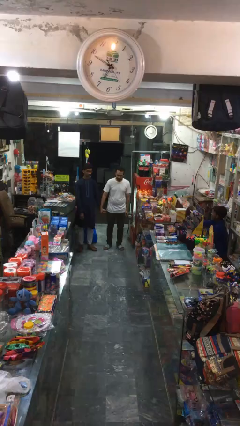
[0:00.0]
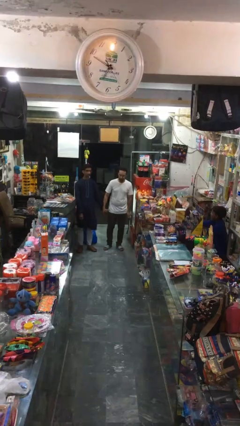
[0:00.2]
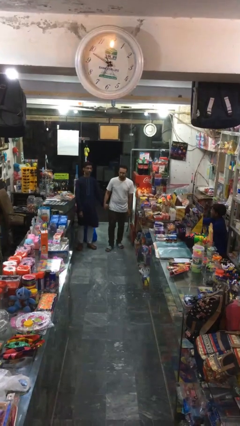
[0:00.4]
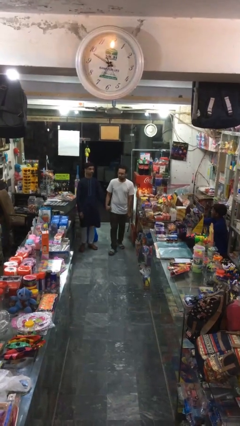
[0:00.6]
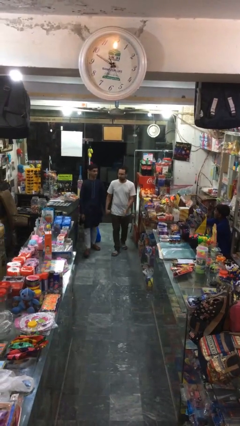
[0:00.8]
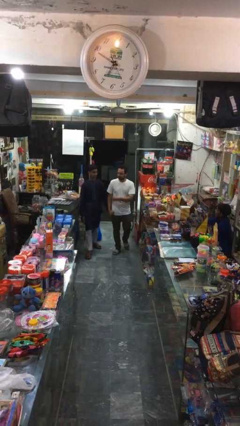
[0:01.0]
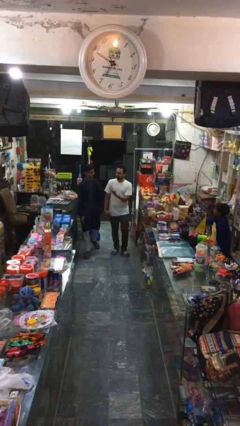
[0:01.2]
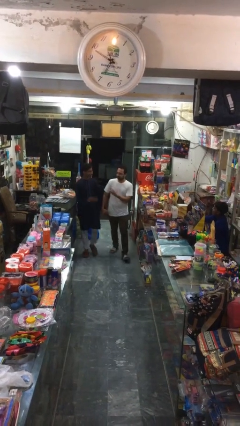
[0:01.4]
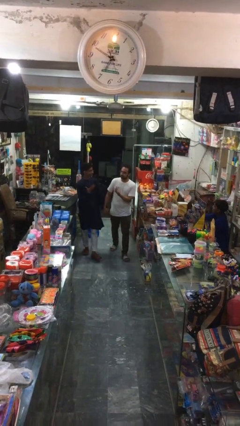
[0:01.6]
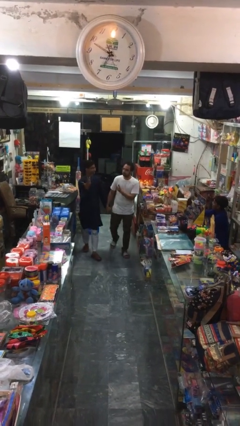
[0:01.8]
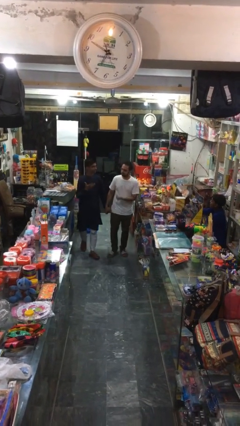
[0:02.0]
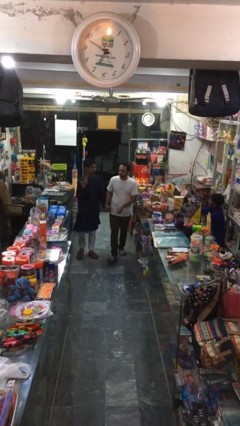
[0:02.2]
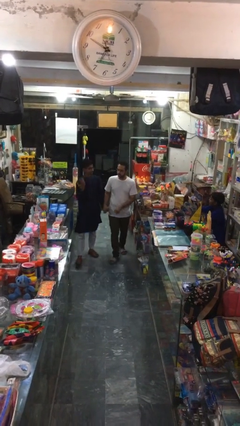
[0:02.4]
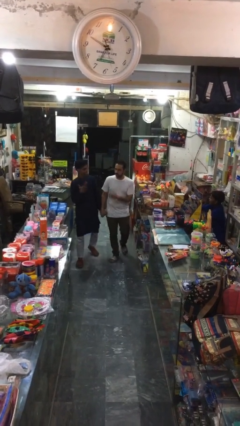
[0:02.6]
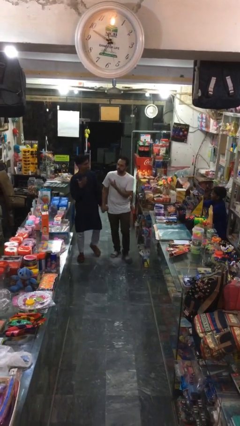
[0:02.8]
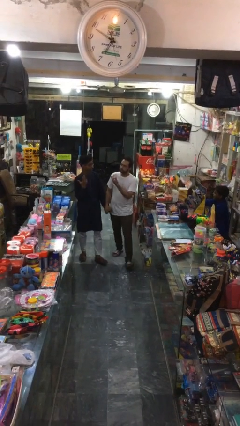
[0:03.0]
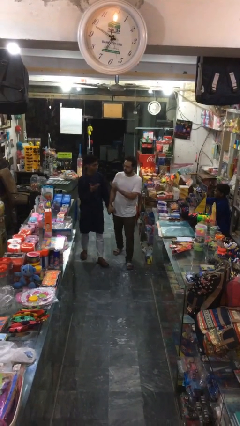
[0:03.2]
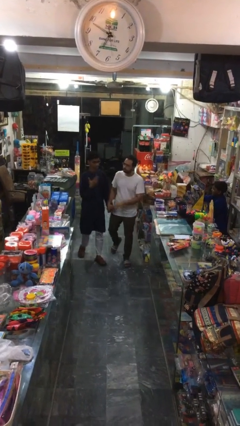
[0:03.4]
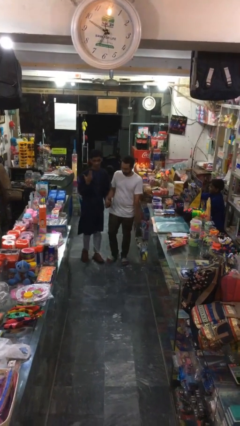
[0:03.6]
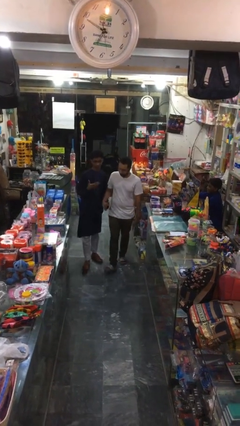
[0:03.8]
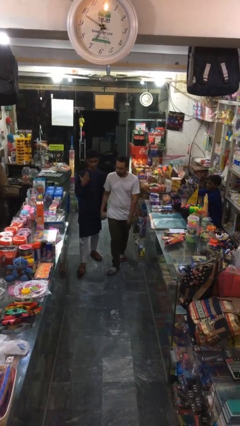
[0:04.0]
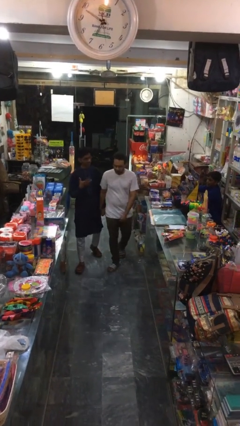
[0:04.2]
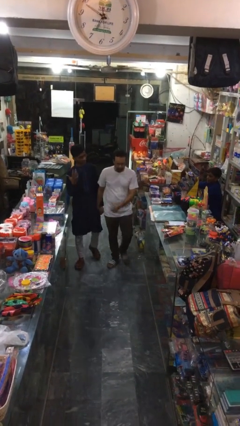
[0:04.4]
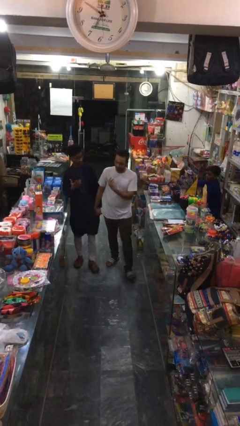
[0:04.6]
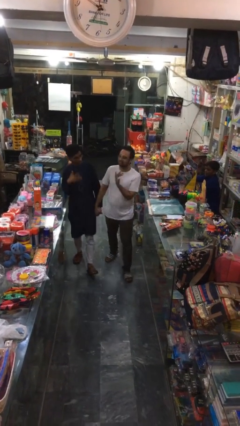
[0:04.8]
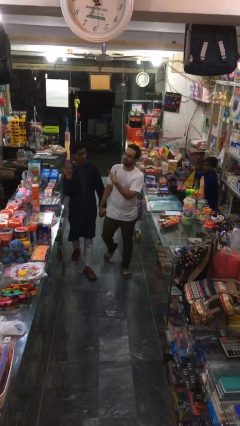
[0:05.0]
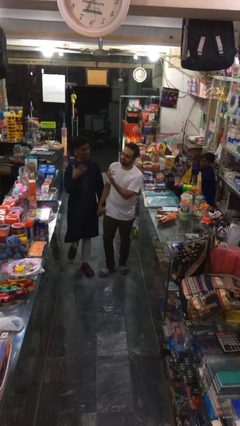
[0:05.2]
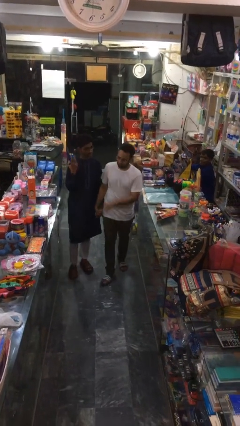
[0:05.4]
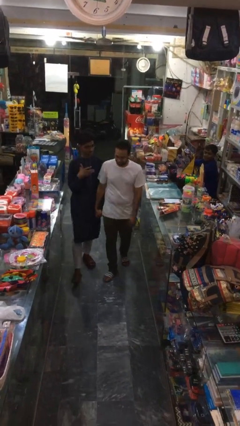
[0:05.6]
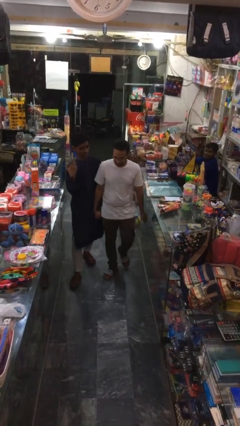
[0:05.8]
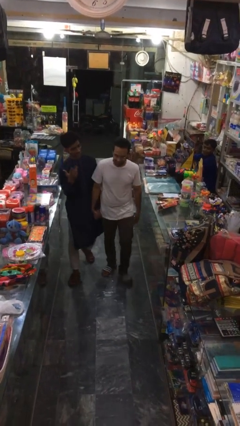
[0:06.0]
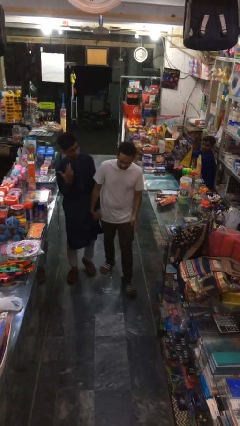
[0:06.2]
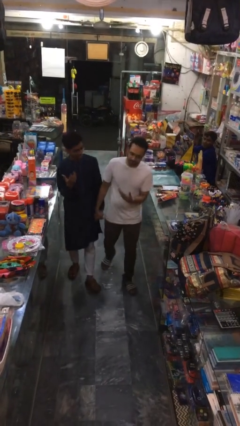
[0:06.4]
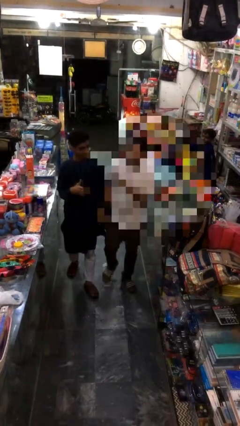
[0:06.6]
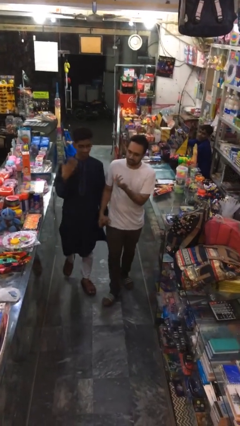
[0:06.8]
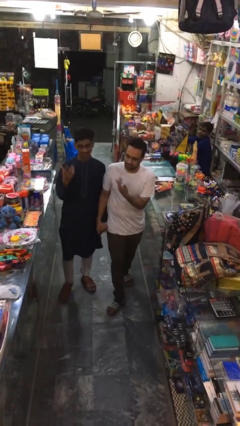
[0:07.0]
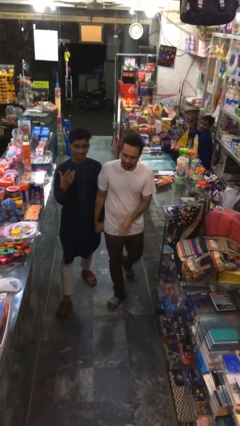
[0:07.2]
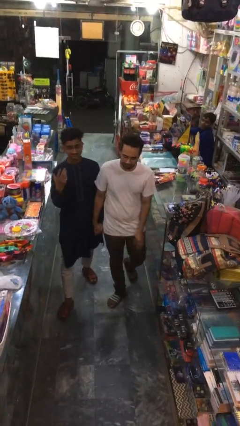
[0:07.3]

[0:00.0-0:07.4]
person holds hand

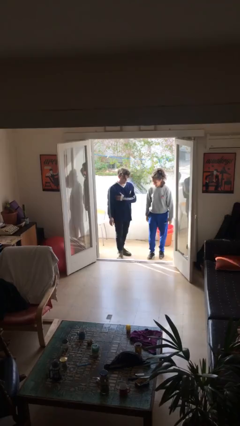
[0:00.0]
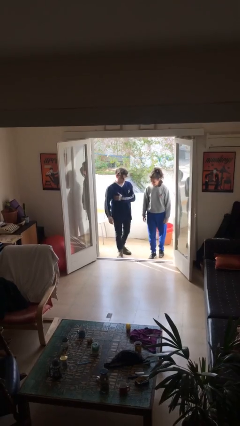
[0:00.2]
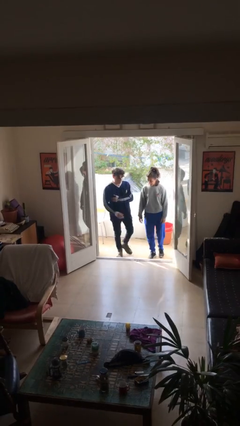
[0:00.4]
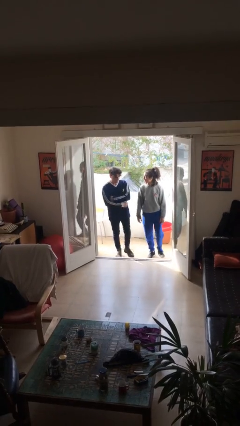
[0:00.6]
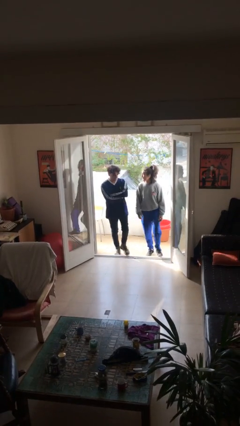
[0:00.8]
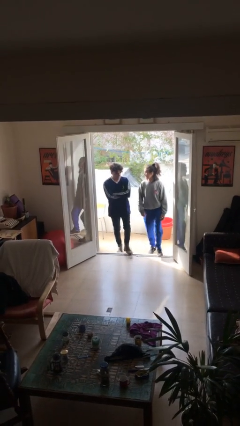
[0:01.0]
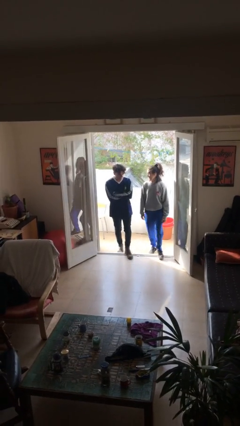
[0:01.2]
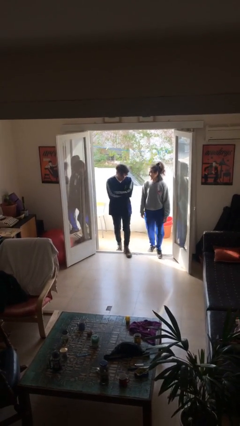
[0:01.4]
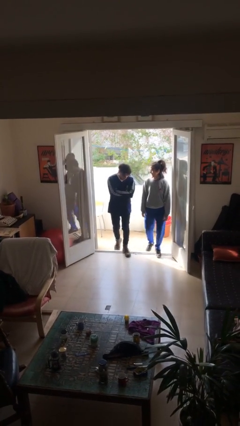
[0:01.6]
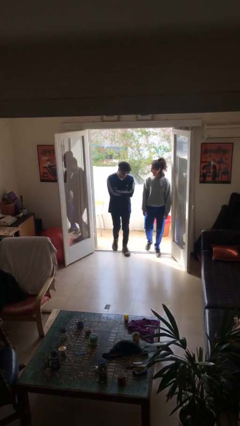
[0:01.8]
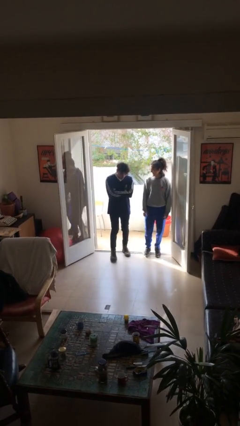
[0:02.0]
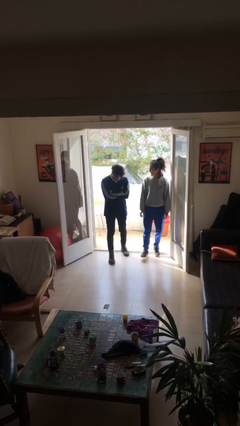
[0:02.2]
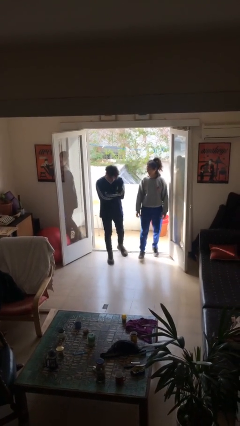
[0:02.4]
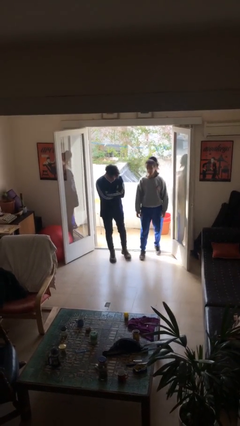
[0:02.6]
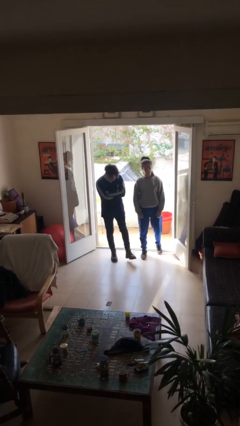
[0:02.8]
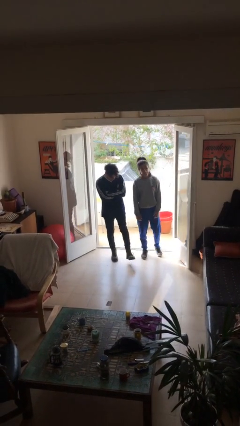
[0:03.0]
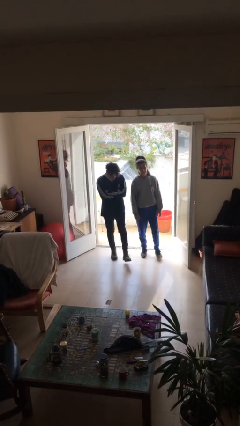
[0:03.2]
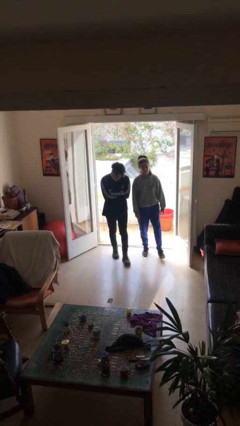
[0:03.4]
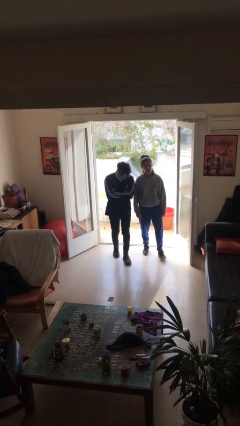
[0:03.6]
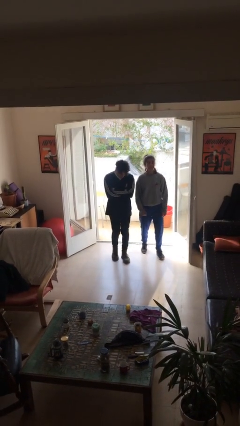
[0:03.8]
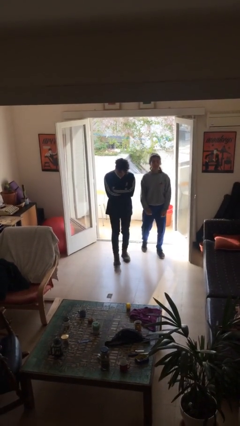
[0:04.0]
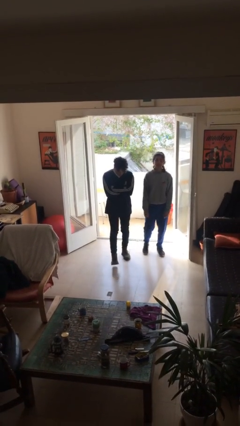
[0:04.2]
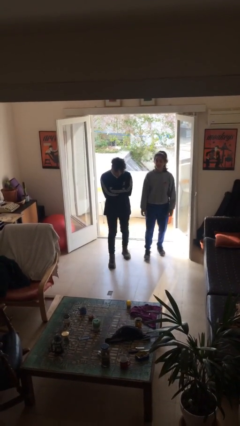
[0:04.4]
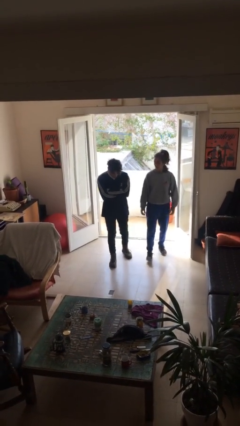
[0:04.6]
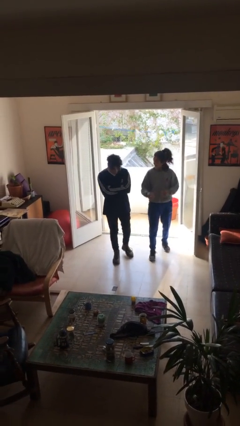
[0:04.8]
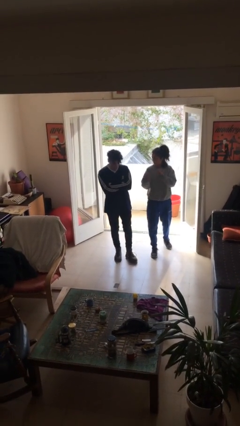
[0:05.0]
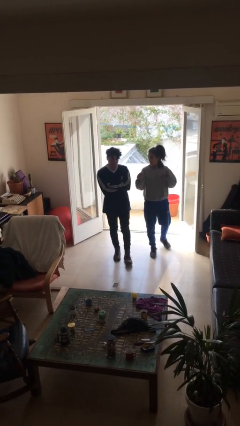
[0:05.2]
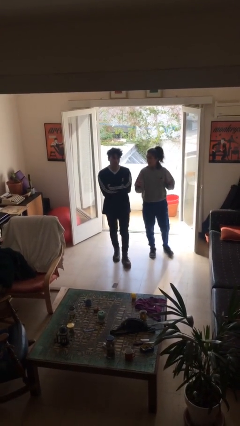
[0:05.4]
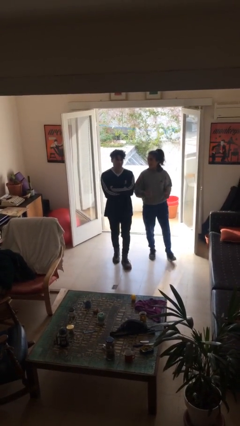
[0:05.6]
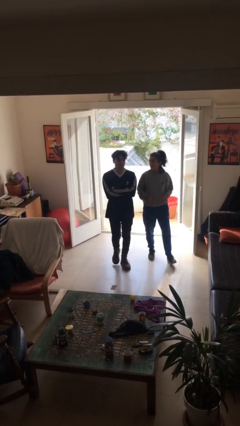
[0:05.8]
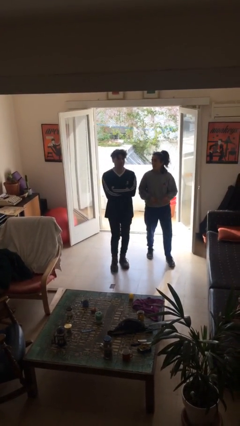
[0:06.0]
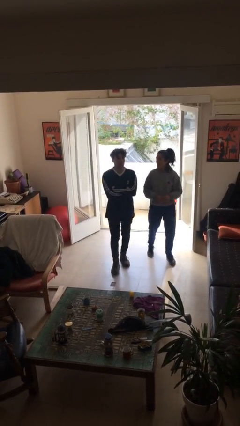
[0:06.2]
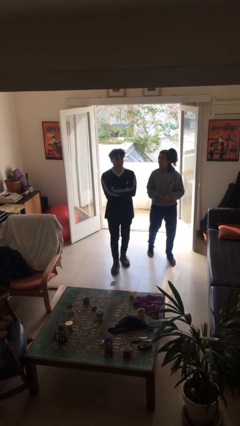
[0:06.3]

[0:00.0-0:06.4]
person talks to person

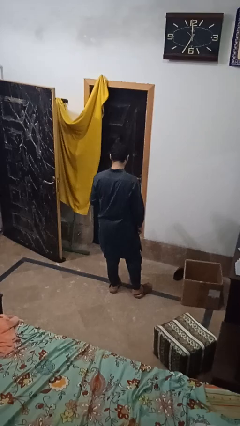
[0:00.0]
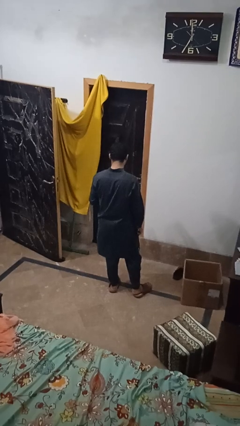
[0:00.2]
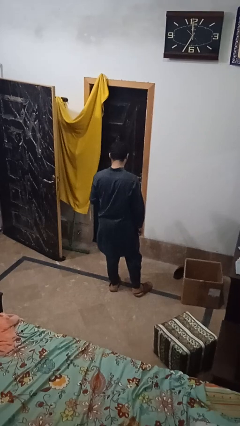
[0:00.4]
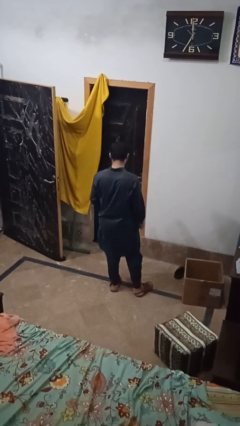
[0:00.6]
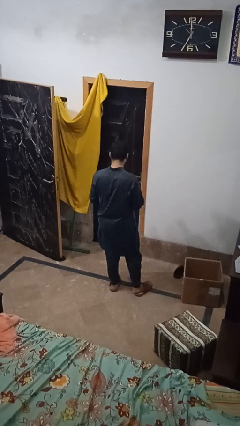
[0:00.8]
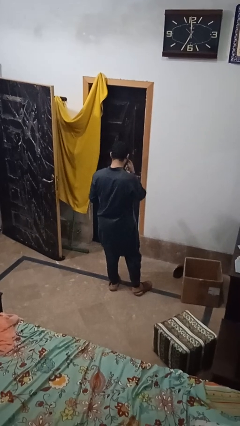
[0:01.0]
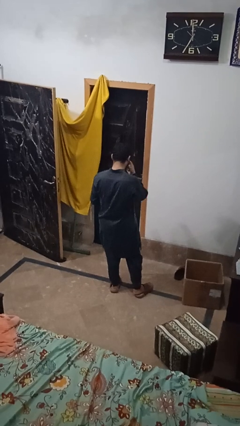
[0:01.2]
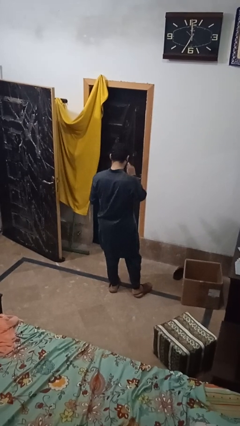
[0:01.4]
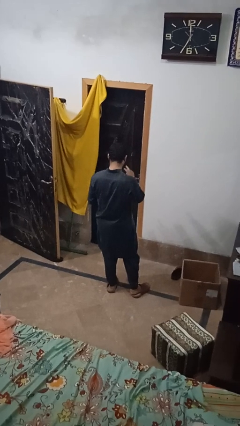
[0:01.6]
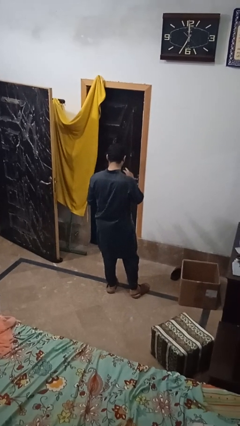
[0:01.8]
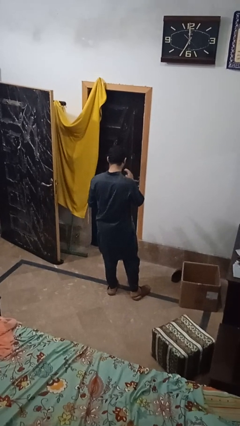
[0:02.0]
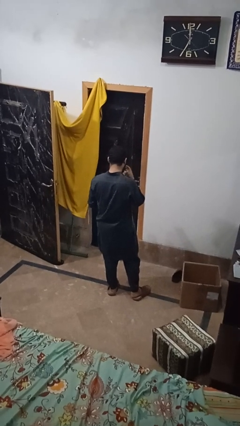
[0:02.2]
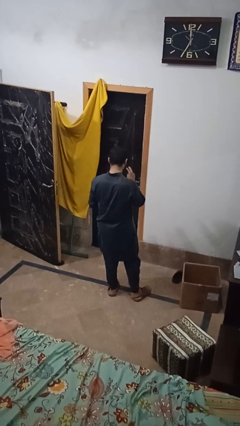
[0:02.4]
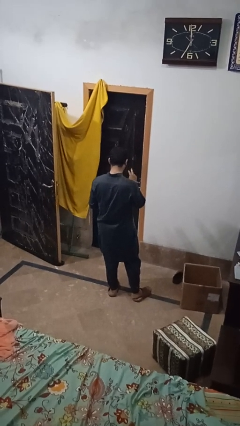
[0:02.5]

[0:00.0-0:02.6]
person gestures watch closely

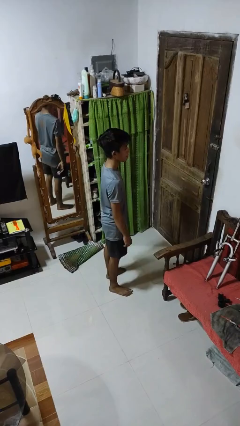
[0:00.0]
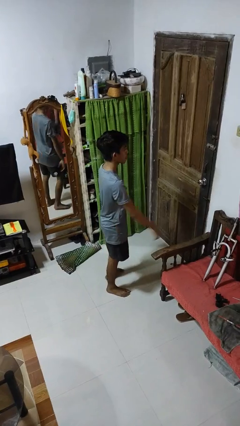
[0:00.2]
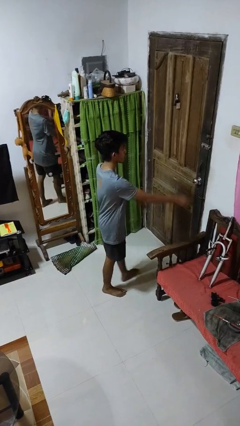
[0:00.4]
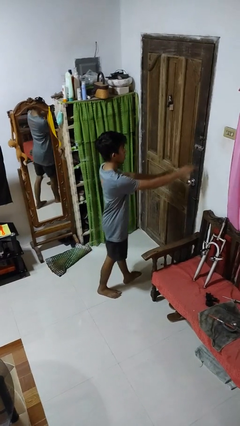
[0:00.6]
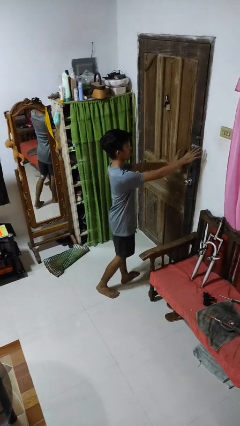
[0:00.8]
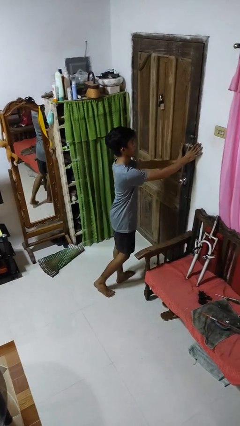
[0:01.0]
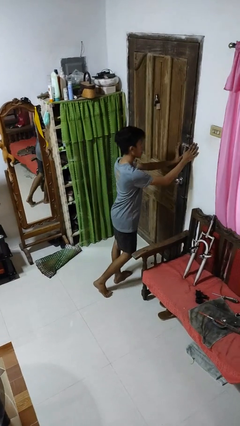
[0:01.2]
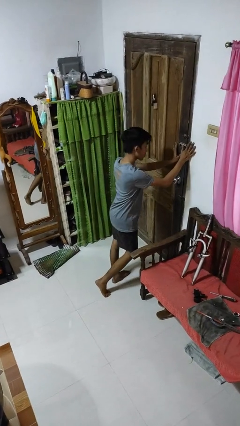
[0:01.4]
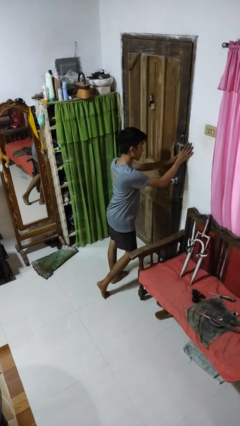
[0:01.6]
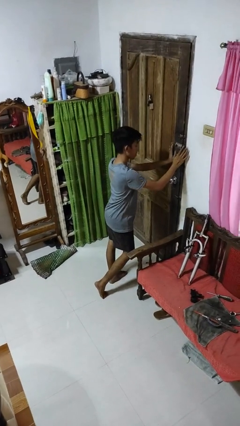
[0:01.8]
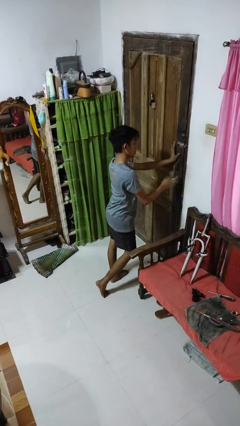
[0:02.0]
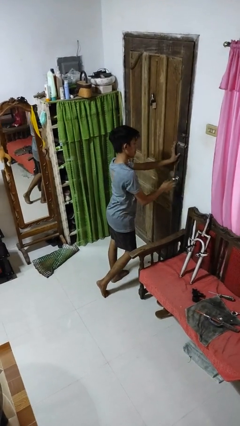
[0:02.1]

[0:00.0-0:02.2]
person unlocks door with keys
